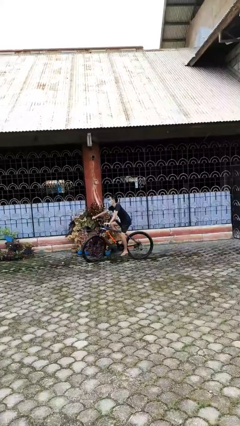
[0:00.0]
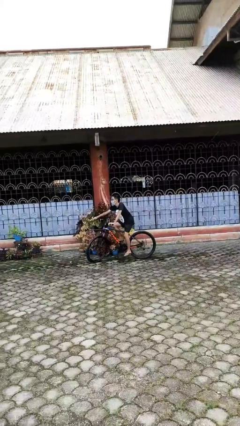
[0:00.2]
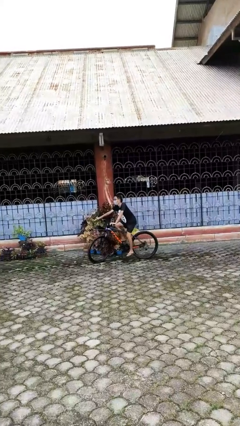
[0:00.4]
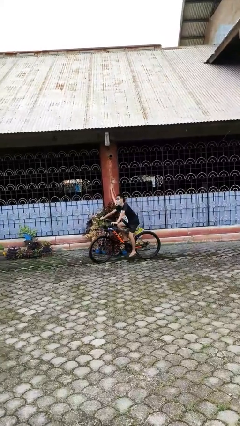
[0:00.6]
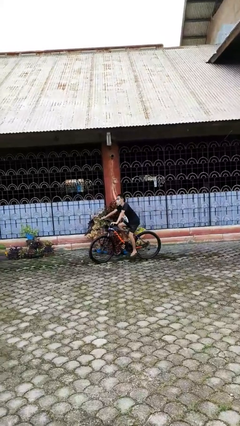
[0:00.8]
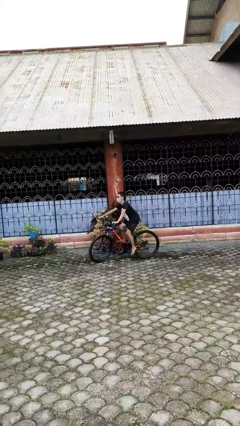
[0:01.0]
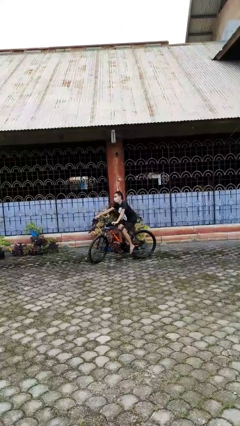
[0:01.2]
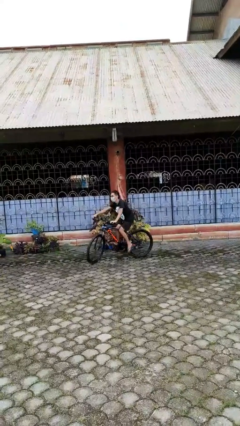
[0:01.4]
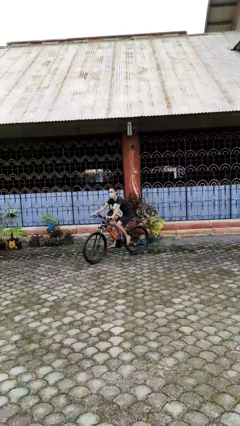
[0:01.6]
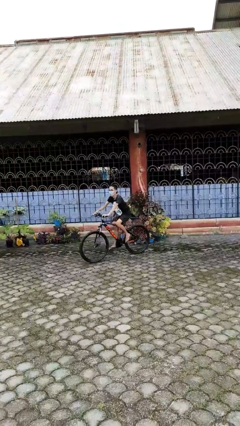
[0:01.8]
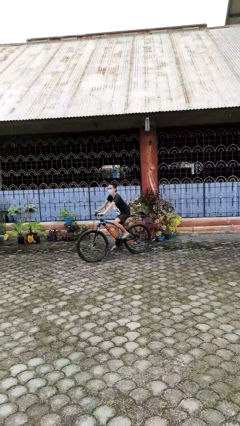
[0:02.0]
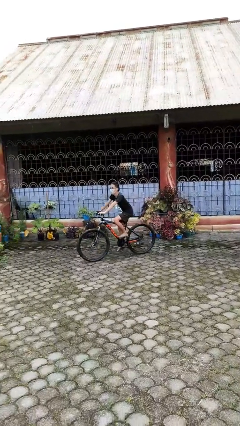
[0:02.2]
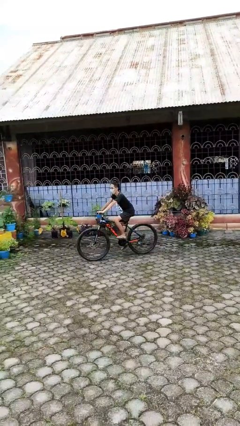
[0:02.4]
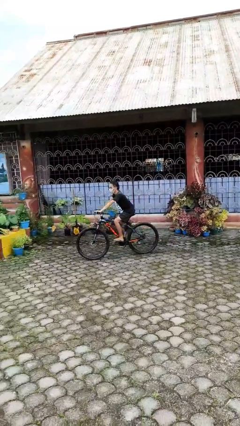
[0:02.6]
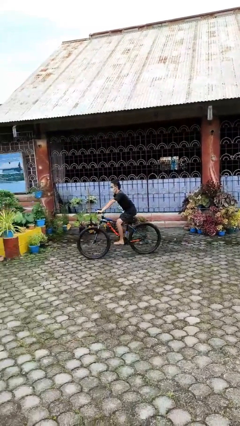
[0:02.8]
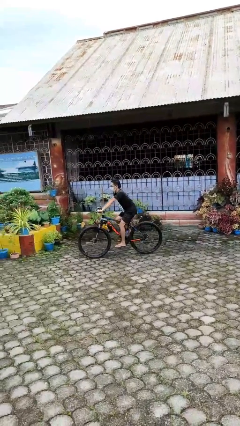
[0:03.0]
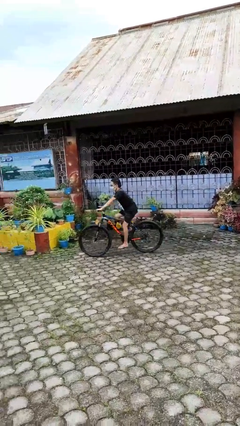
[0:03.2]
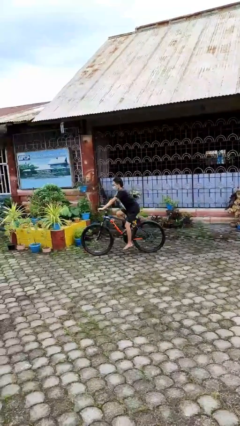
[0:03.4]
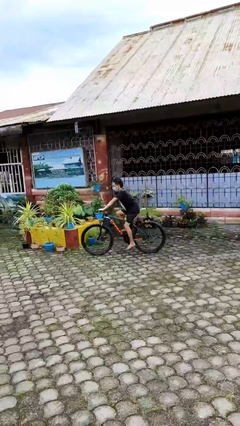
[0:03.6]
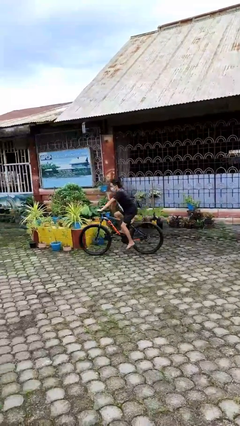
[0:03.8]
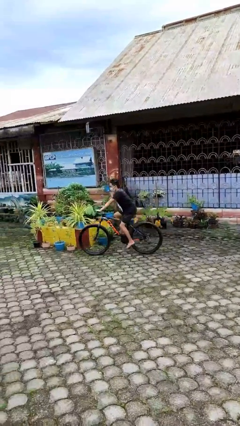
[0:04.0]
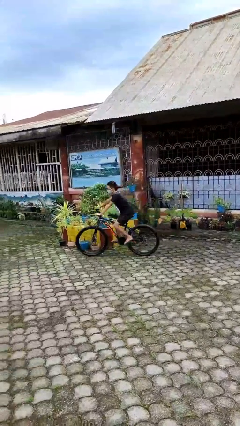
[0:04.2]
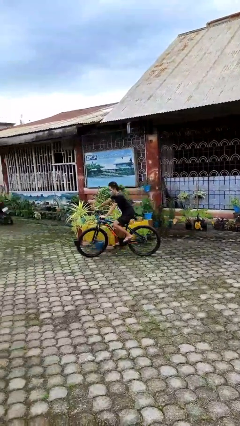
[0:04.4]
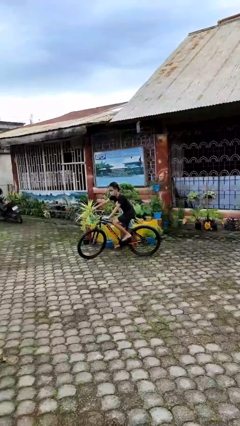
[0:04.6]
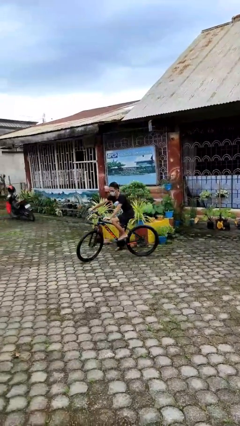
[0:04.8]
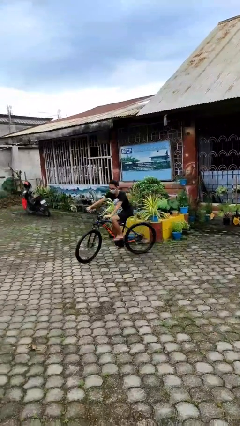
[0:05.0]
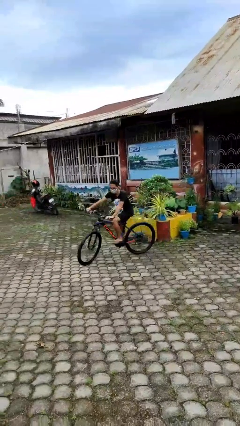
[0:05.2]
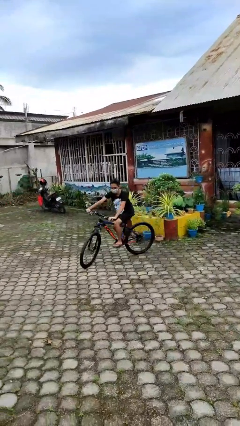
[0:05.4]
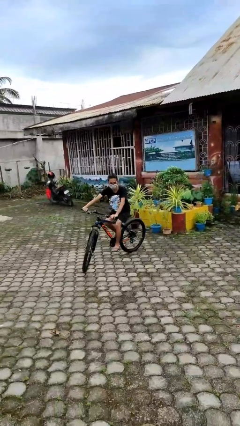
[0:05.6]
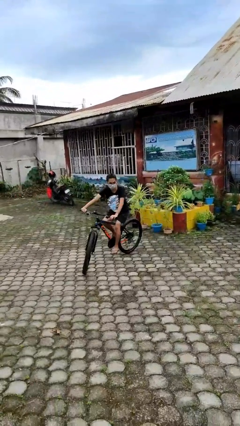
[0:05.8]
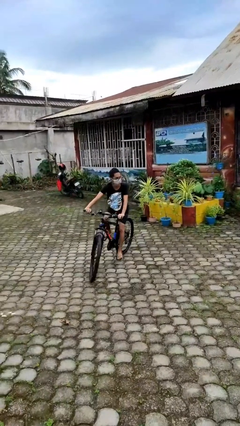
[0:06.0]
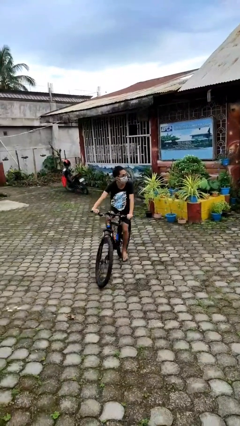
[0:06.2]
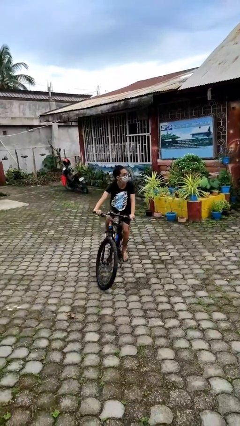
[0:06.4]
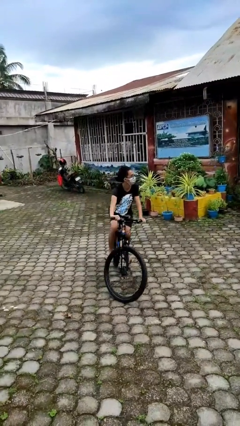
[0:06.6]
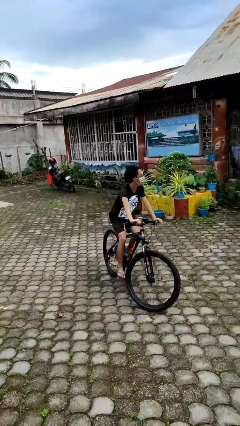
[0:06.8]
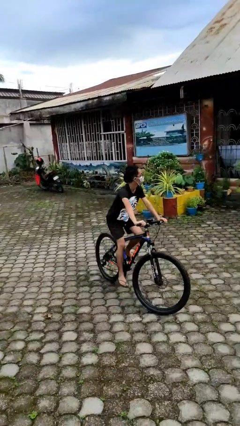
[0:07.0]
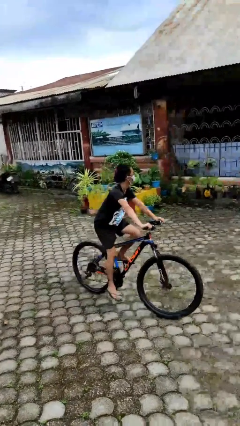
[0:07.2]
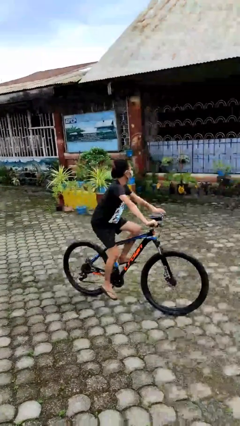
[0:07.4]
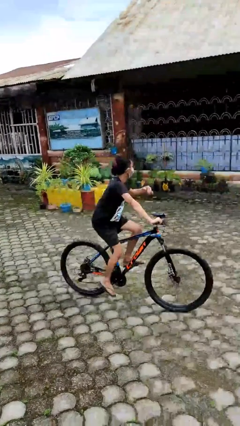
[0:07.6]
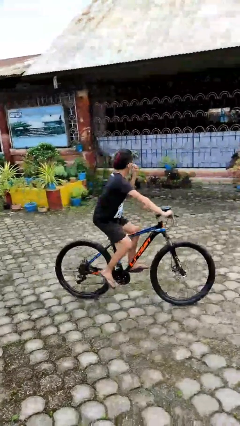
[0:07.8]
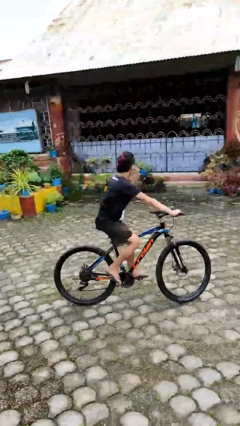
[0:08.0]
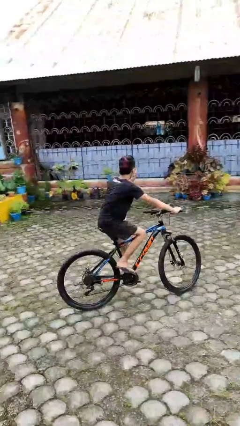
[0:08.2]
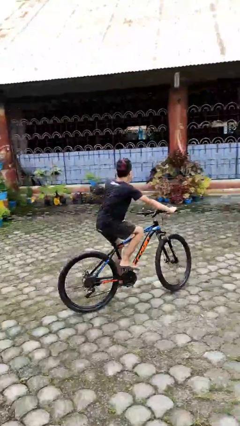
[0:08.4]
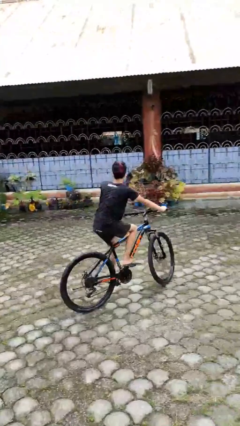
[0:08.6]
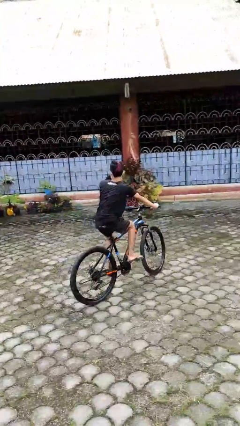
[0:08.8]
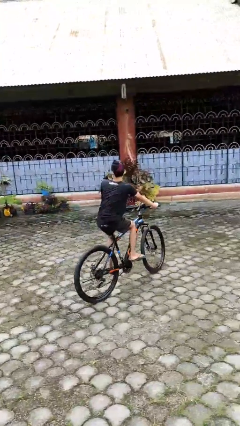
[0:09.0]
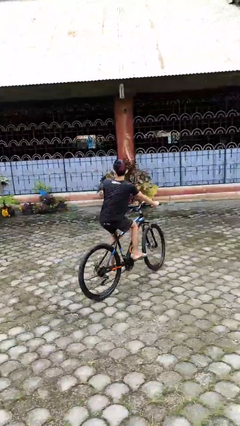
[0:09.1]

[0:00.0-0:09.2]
person rides bicycle

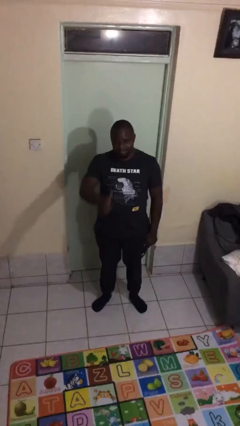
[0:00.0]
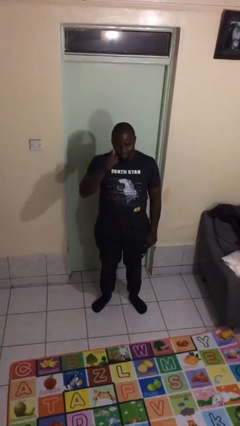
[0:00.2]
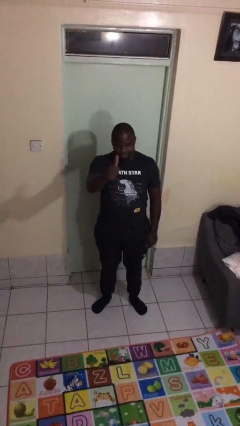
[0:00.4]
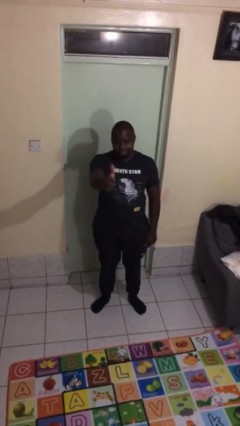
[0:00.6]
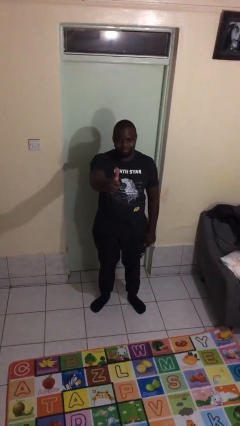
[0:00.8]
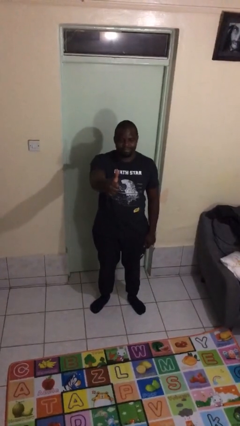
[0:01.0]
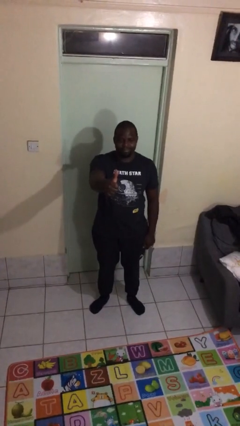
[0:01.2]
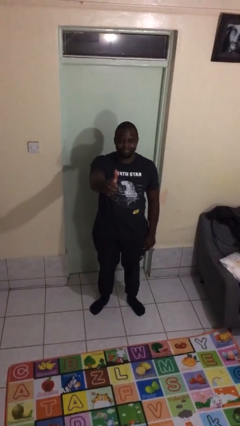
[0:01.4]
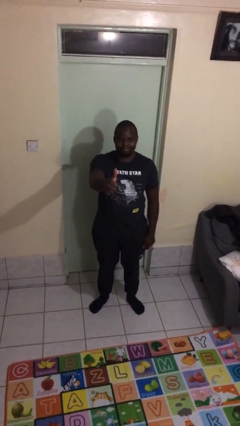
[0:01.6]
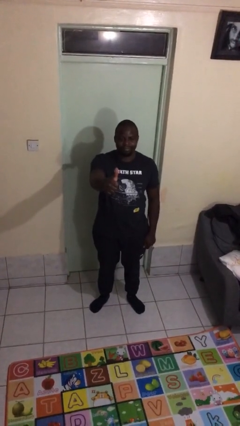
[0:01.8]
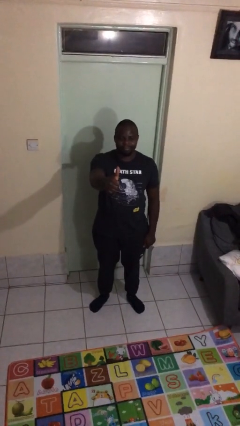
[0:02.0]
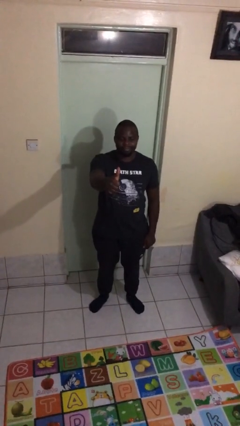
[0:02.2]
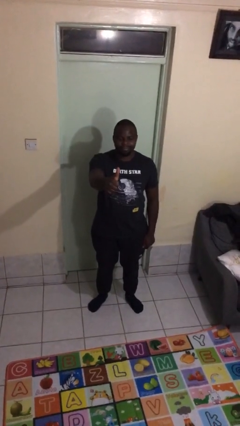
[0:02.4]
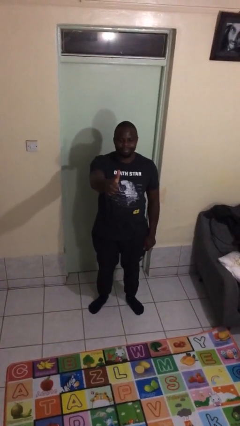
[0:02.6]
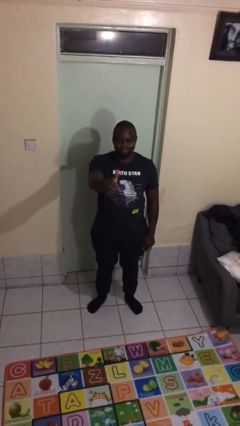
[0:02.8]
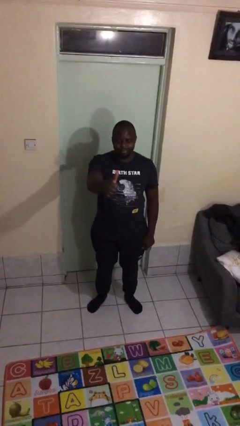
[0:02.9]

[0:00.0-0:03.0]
person gestures thumbs up

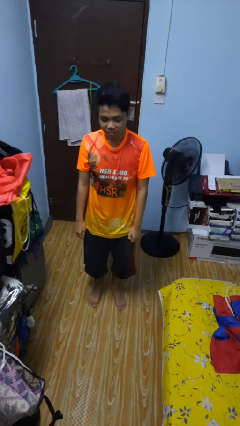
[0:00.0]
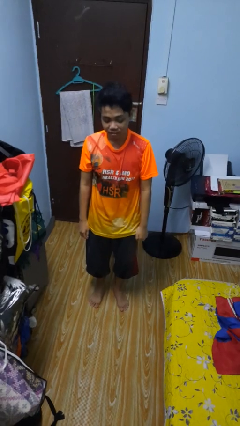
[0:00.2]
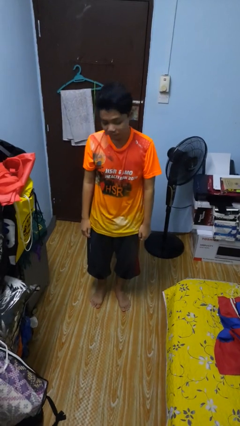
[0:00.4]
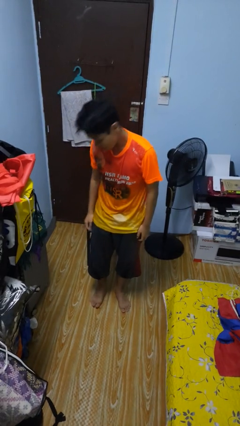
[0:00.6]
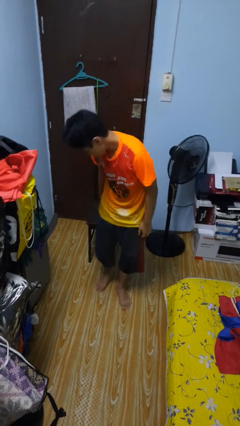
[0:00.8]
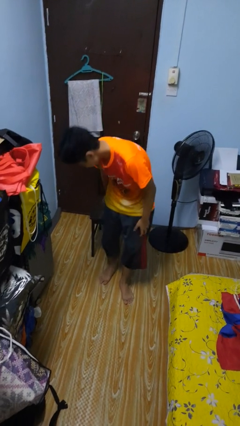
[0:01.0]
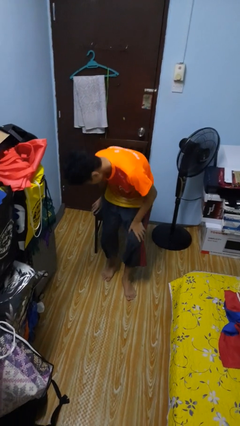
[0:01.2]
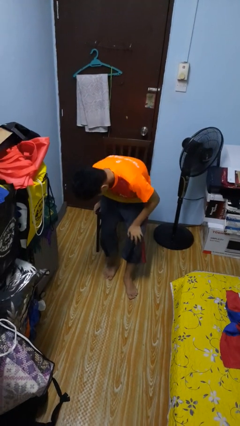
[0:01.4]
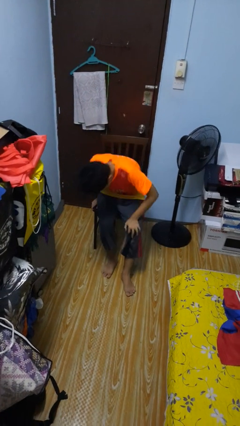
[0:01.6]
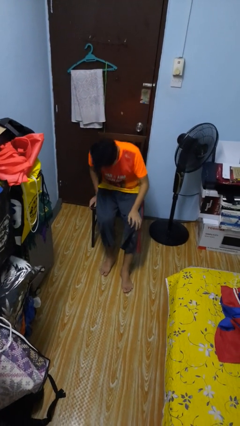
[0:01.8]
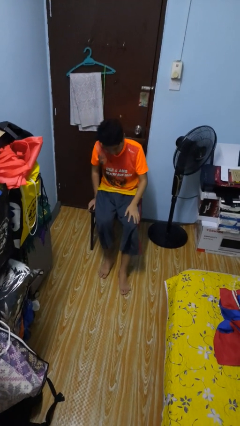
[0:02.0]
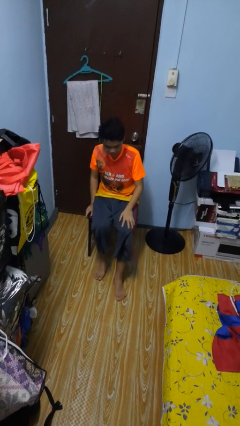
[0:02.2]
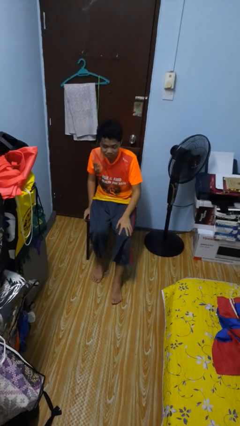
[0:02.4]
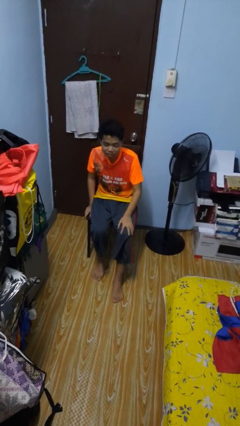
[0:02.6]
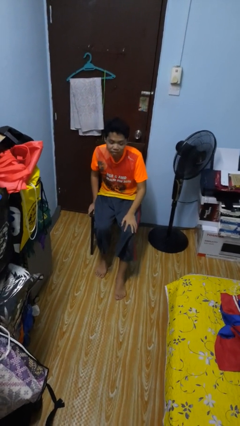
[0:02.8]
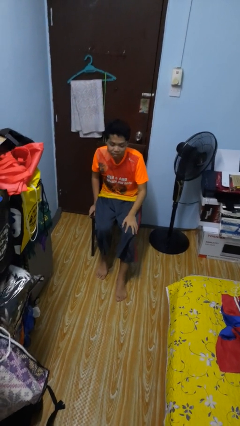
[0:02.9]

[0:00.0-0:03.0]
person sits down

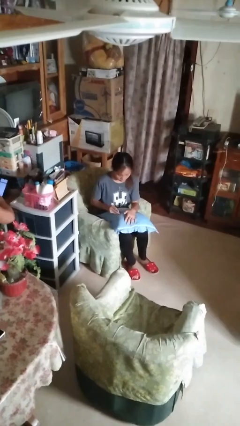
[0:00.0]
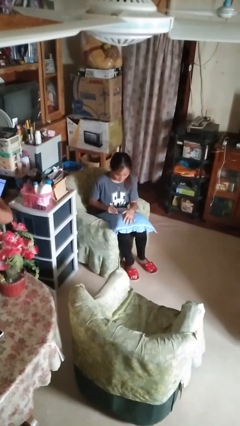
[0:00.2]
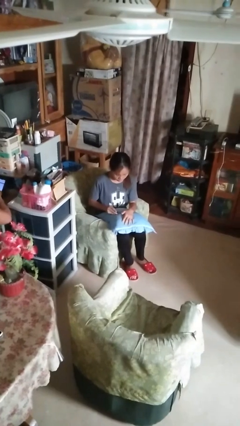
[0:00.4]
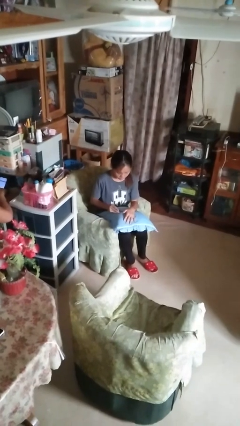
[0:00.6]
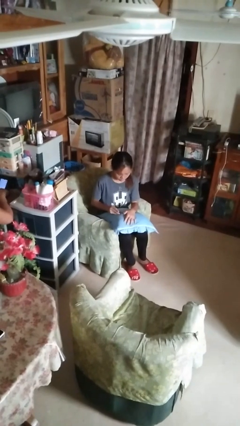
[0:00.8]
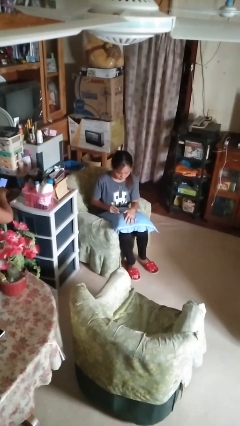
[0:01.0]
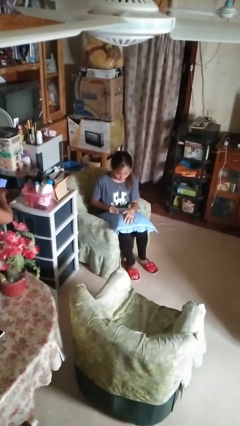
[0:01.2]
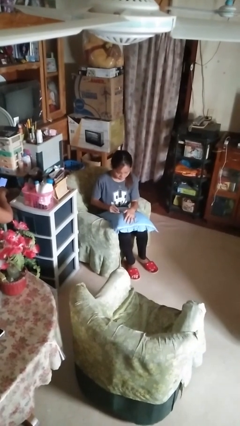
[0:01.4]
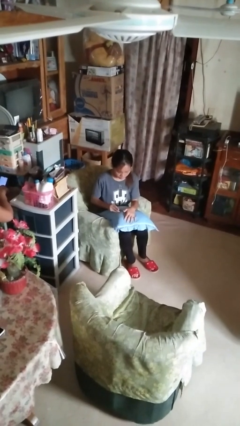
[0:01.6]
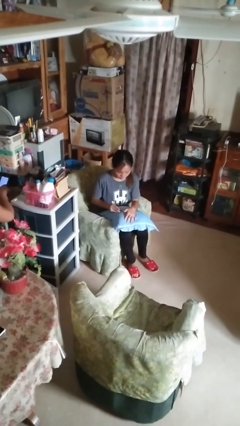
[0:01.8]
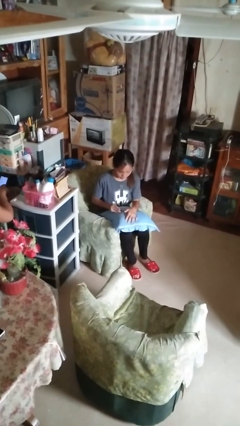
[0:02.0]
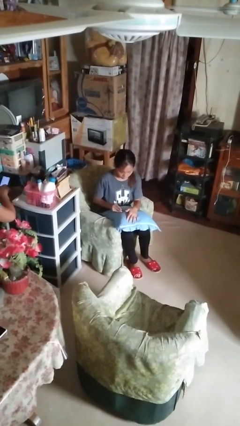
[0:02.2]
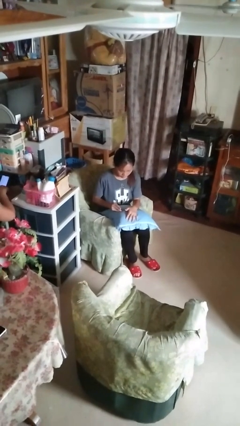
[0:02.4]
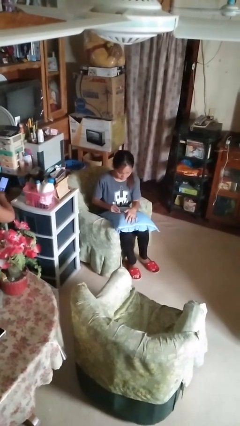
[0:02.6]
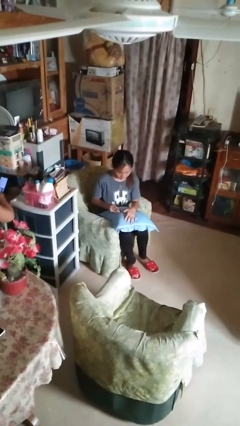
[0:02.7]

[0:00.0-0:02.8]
person files fingernails
